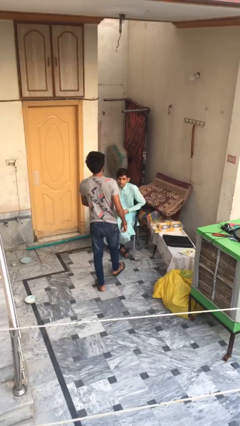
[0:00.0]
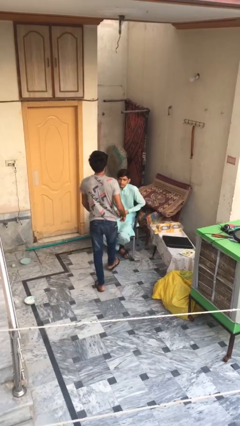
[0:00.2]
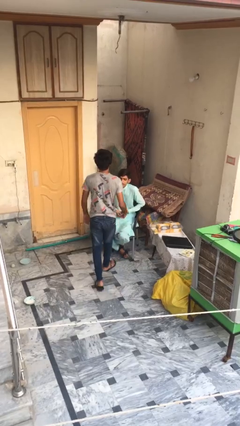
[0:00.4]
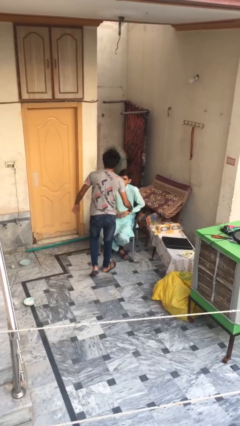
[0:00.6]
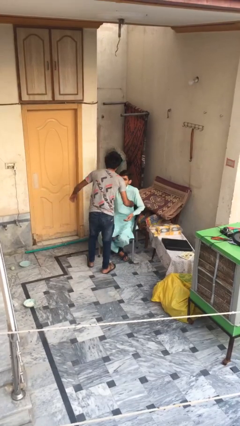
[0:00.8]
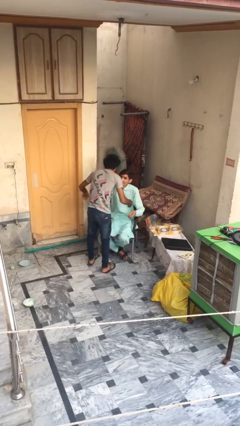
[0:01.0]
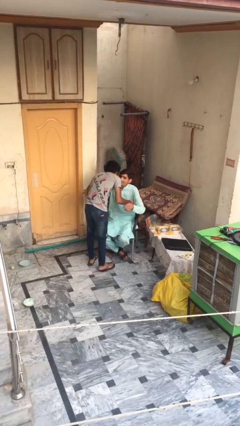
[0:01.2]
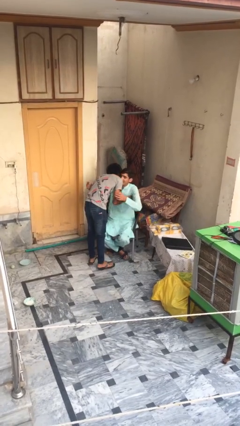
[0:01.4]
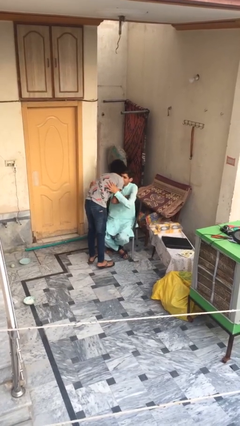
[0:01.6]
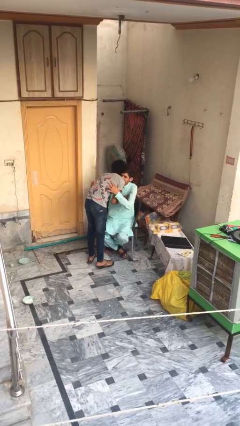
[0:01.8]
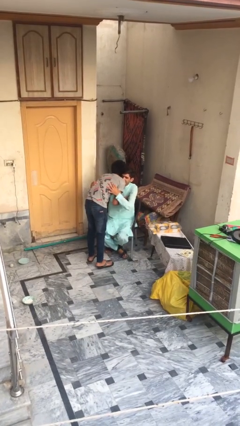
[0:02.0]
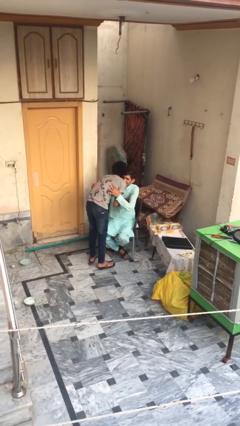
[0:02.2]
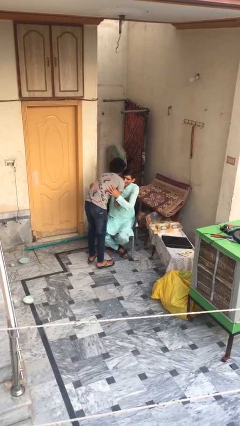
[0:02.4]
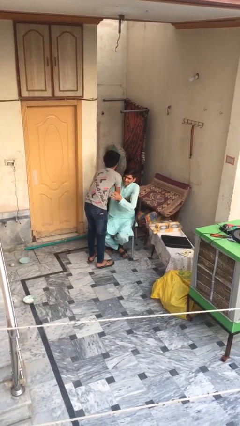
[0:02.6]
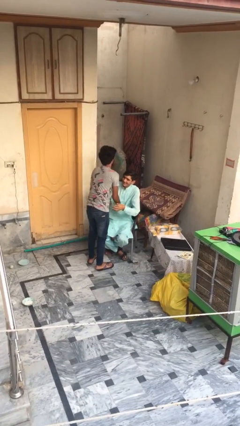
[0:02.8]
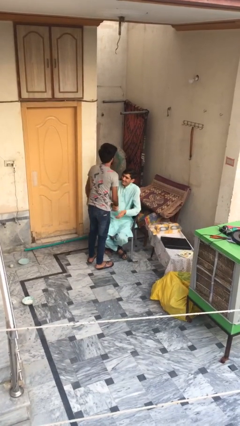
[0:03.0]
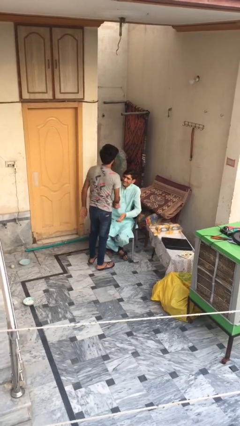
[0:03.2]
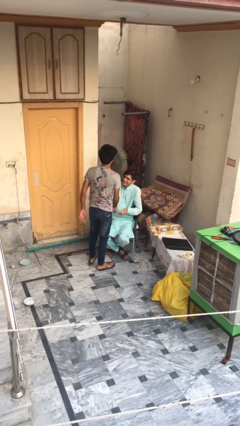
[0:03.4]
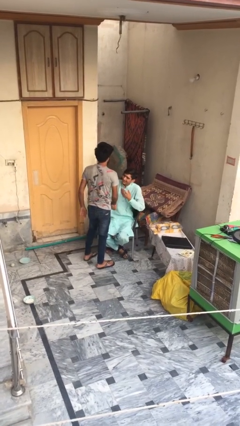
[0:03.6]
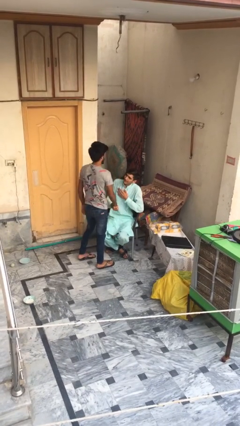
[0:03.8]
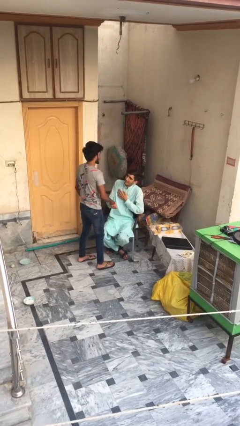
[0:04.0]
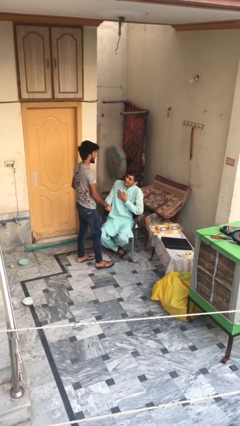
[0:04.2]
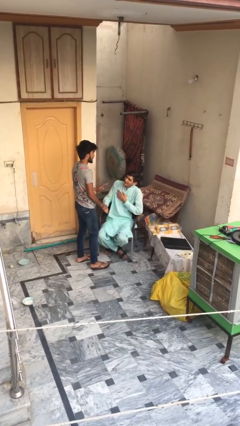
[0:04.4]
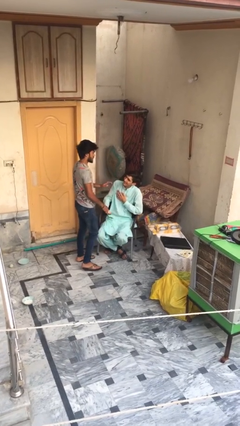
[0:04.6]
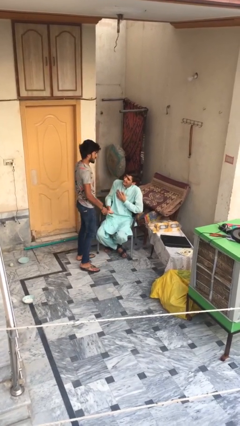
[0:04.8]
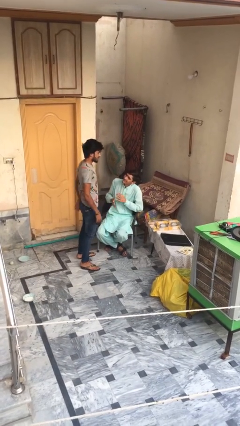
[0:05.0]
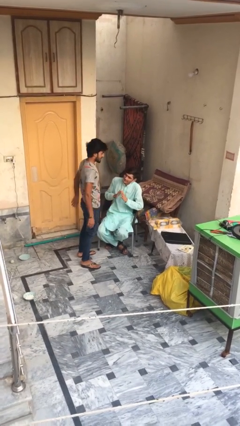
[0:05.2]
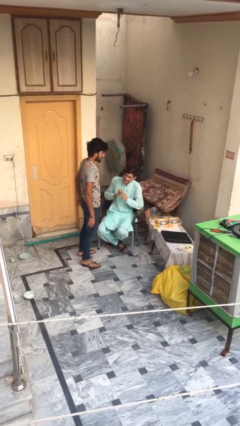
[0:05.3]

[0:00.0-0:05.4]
person embraces person

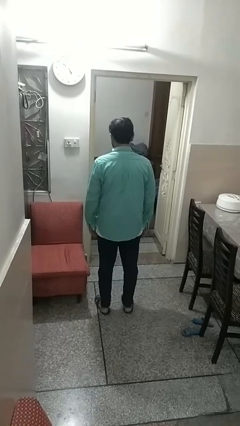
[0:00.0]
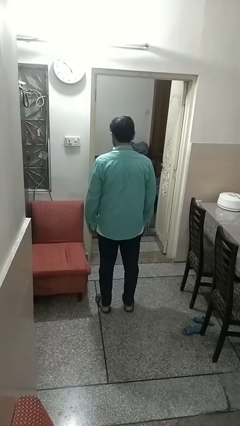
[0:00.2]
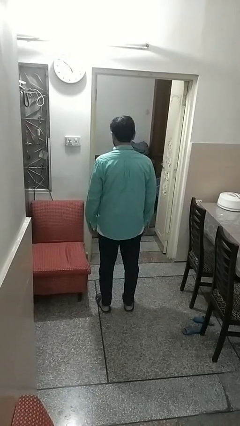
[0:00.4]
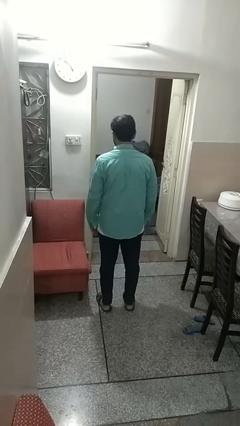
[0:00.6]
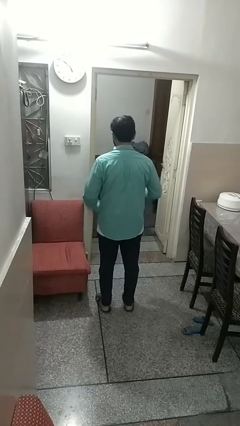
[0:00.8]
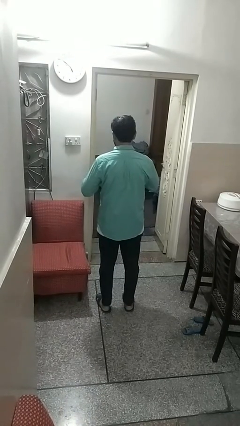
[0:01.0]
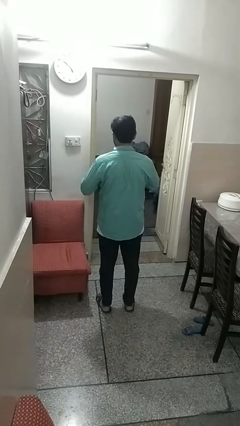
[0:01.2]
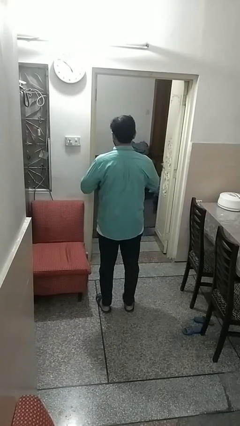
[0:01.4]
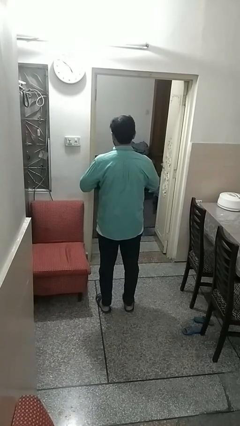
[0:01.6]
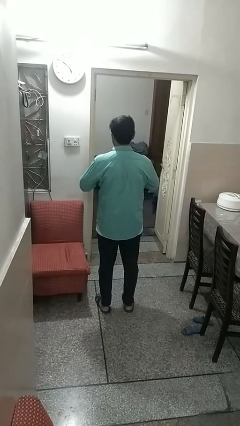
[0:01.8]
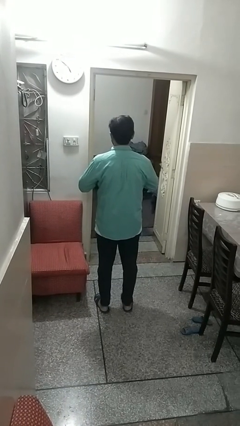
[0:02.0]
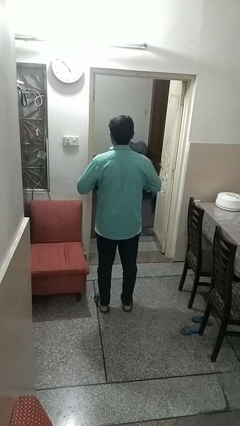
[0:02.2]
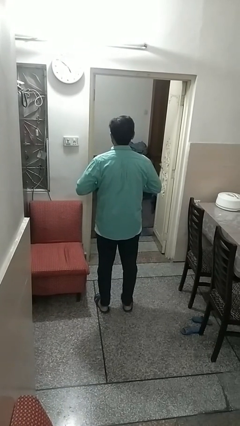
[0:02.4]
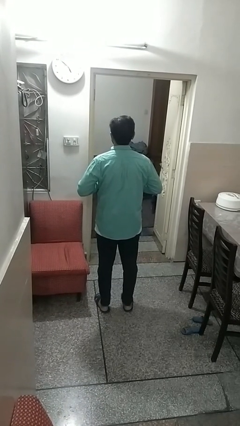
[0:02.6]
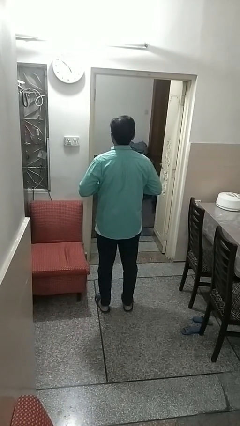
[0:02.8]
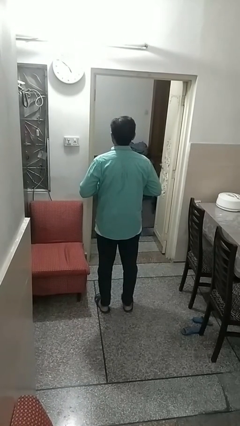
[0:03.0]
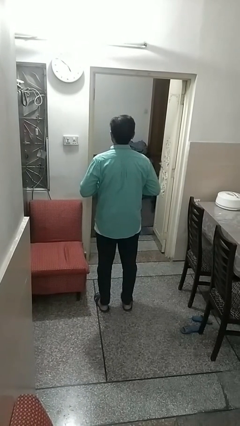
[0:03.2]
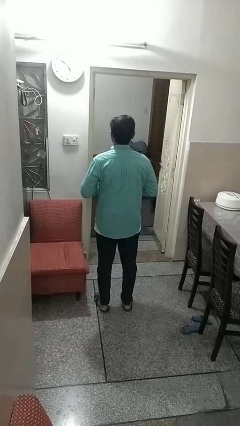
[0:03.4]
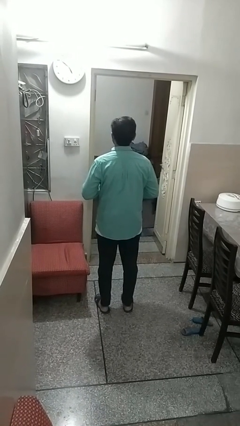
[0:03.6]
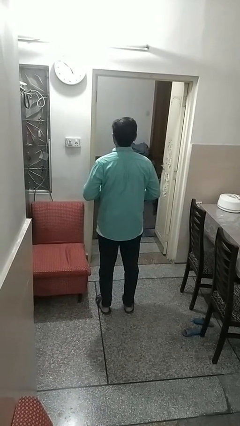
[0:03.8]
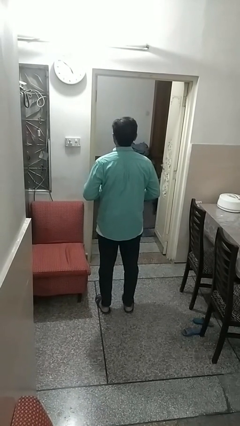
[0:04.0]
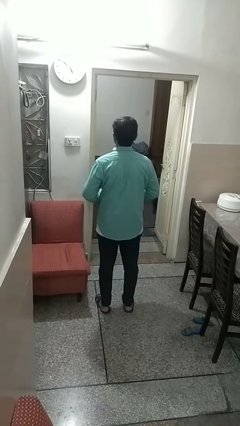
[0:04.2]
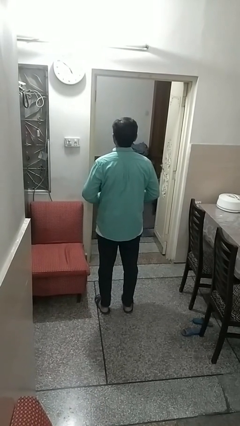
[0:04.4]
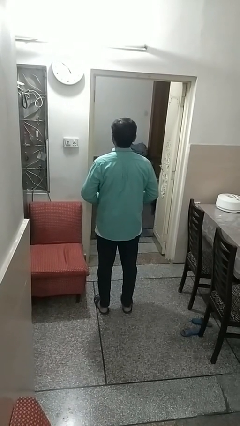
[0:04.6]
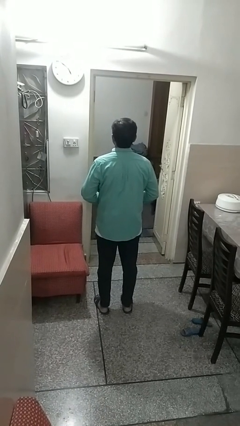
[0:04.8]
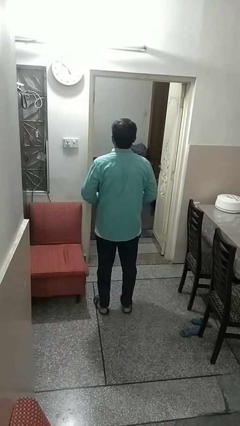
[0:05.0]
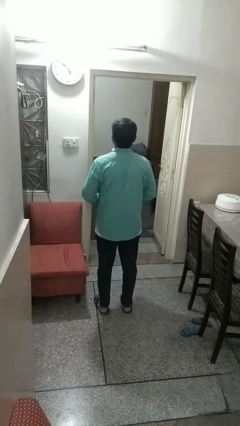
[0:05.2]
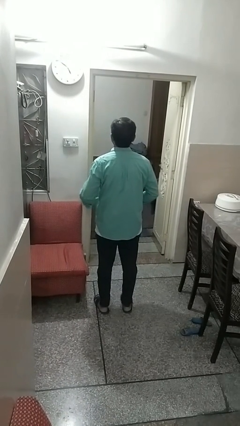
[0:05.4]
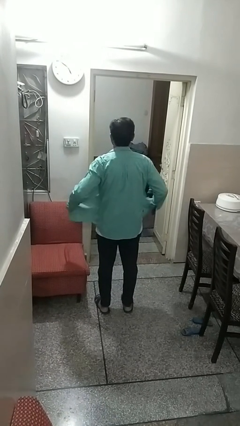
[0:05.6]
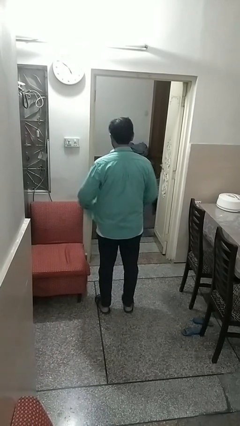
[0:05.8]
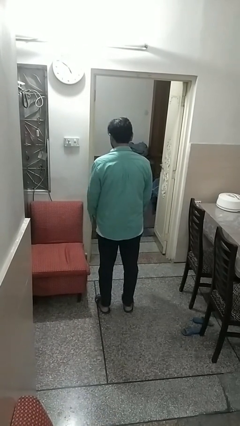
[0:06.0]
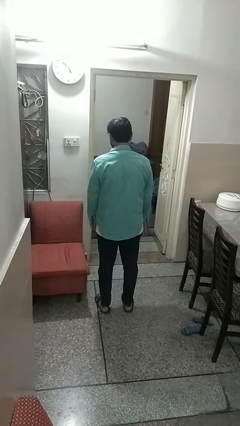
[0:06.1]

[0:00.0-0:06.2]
person unbuttons shirt

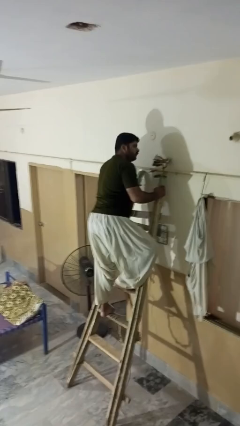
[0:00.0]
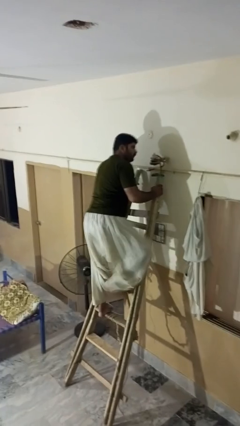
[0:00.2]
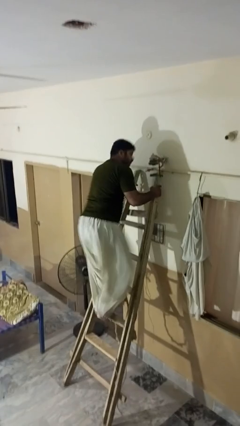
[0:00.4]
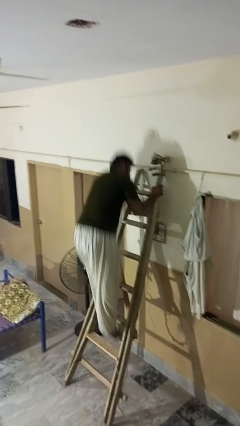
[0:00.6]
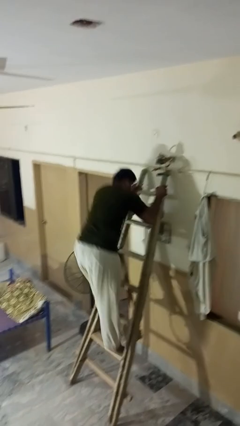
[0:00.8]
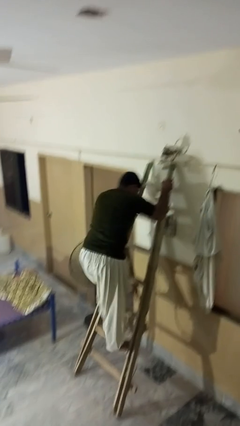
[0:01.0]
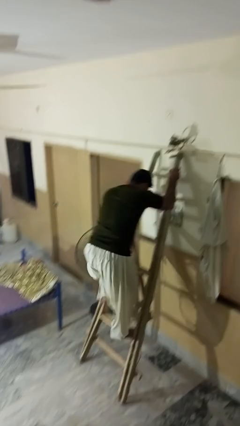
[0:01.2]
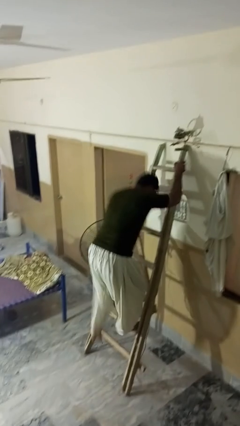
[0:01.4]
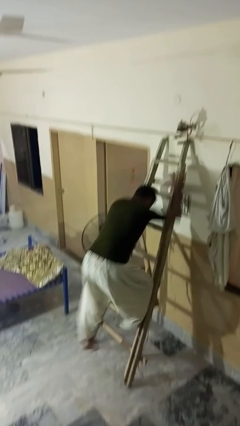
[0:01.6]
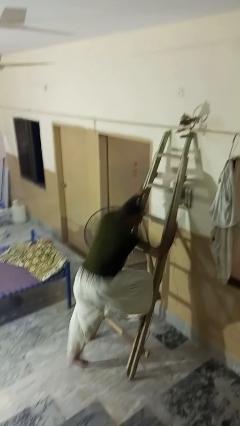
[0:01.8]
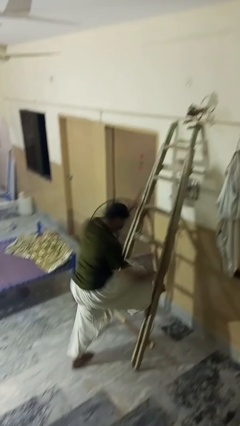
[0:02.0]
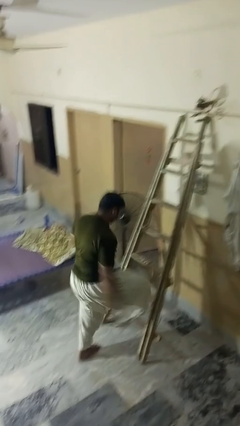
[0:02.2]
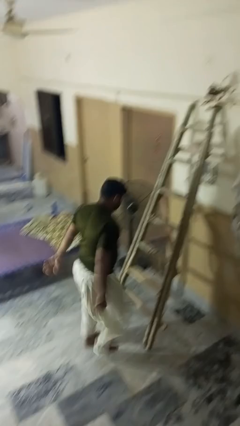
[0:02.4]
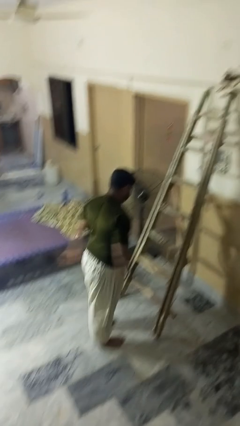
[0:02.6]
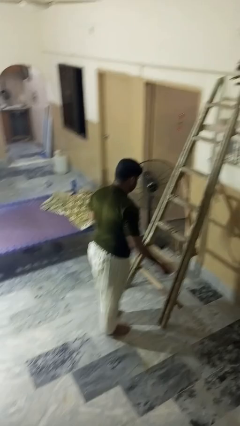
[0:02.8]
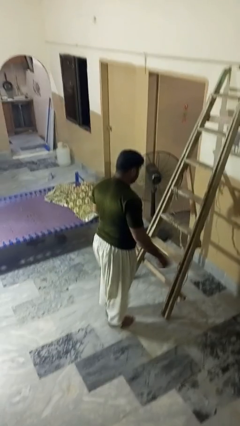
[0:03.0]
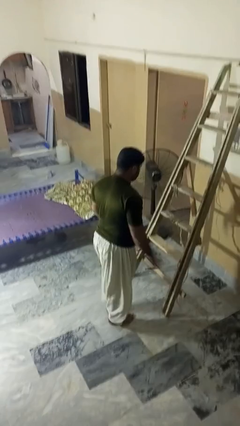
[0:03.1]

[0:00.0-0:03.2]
person climbs down ladder

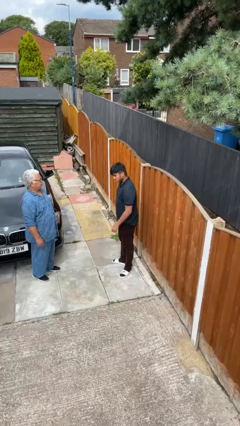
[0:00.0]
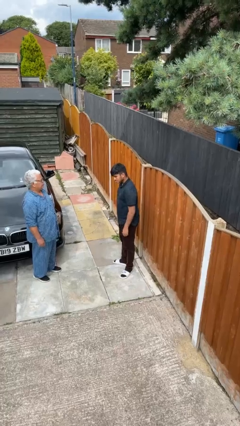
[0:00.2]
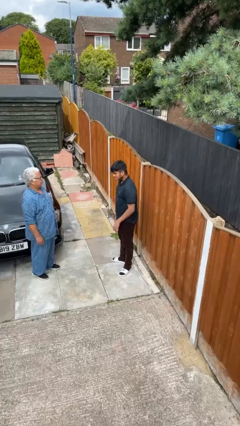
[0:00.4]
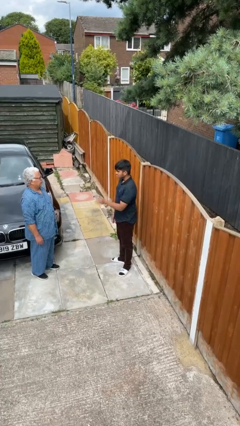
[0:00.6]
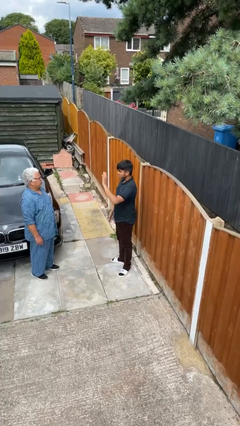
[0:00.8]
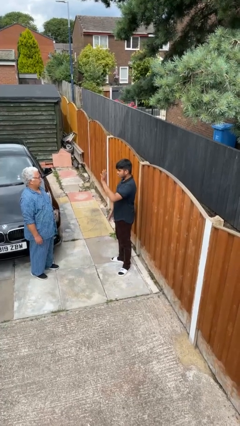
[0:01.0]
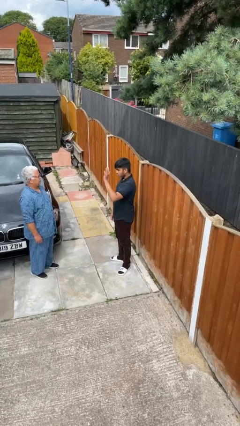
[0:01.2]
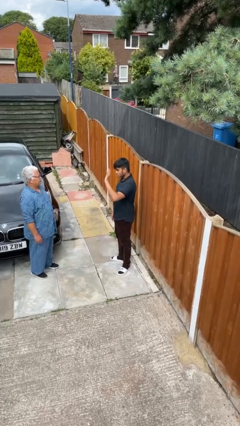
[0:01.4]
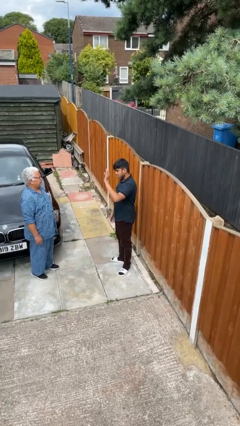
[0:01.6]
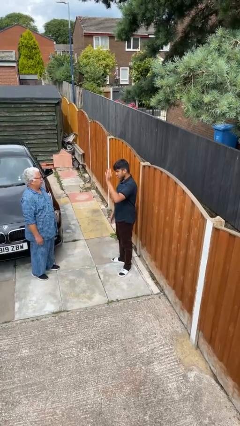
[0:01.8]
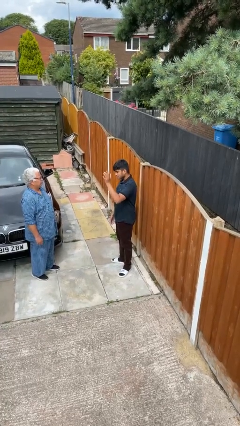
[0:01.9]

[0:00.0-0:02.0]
person waves at person

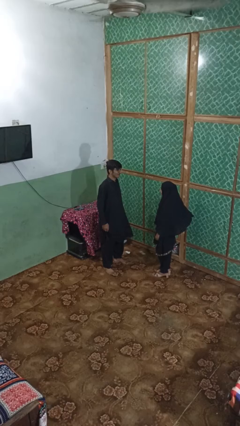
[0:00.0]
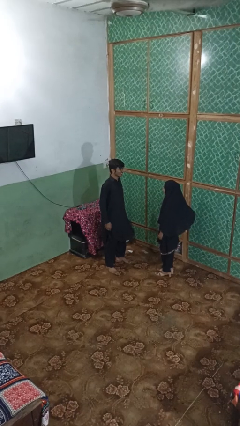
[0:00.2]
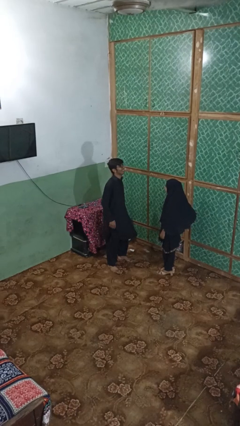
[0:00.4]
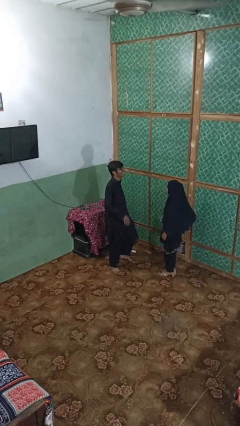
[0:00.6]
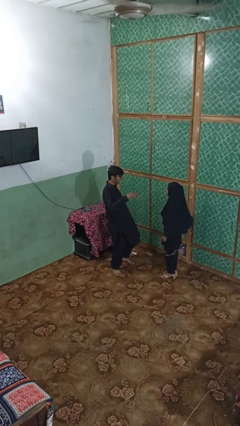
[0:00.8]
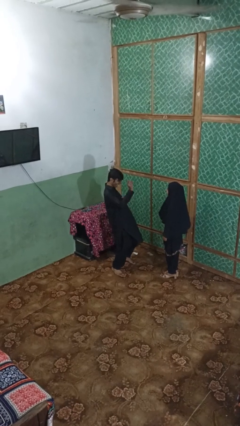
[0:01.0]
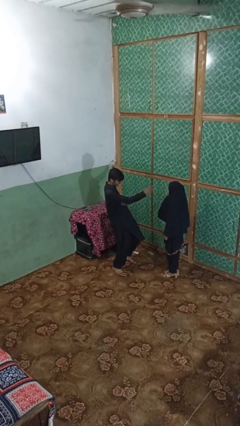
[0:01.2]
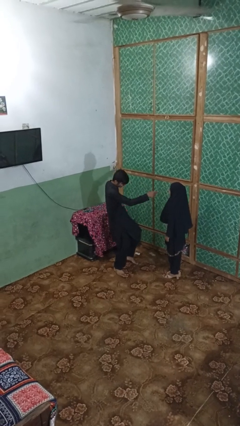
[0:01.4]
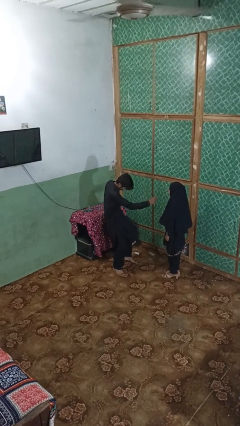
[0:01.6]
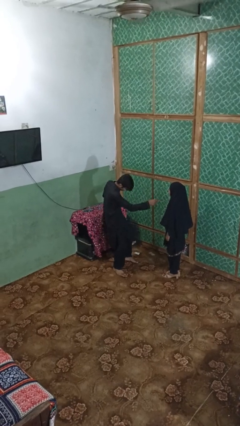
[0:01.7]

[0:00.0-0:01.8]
person laughs with person
